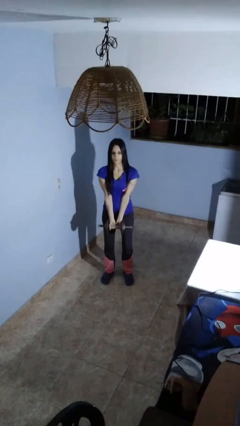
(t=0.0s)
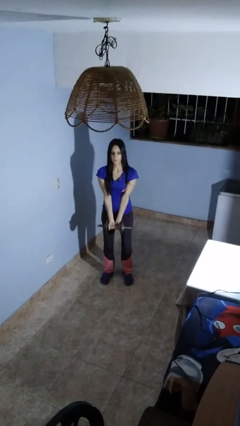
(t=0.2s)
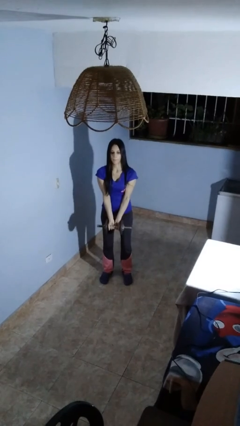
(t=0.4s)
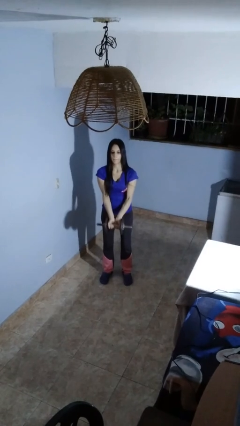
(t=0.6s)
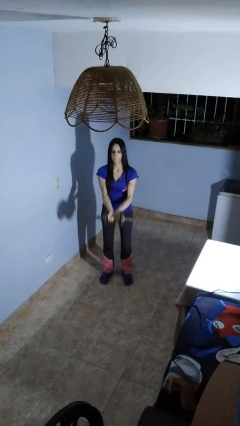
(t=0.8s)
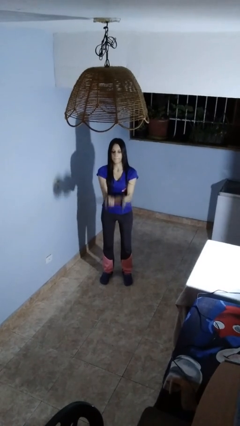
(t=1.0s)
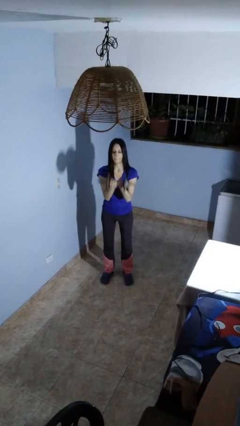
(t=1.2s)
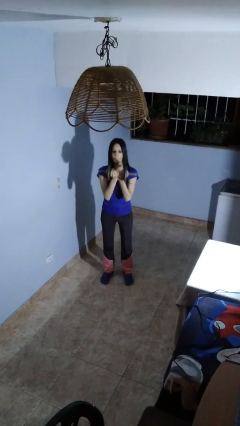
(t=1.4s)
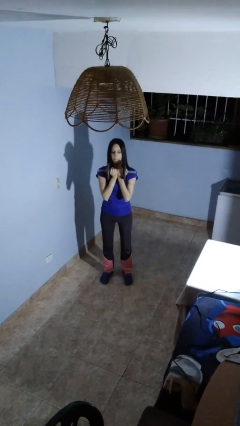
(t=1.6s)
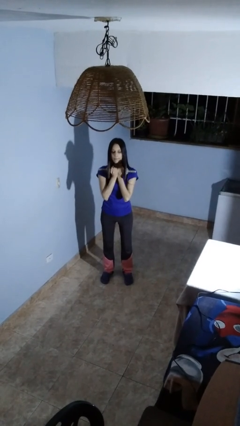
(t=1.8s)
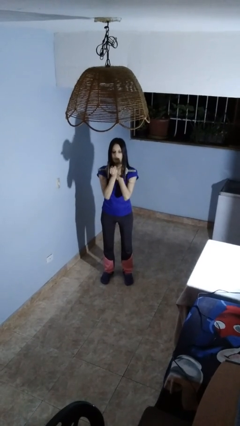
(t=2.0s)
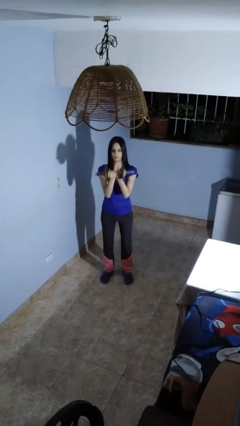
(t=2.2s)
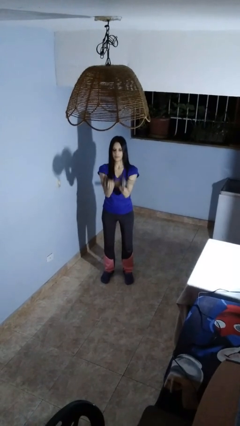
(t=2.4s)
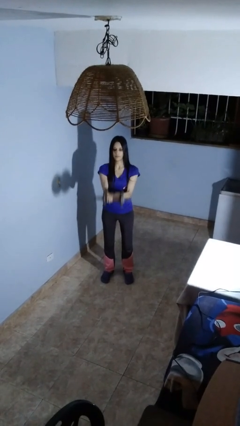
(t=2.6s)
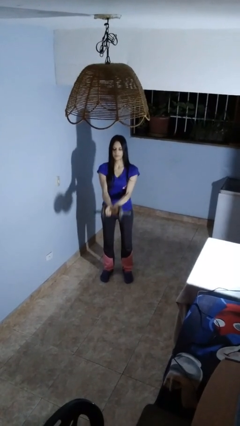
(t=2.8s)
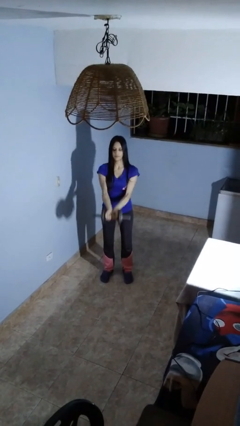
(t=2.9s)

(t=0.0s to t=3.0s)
person lifts dumbbells

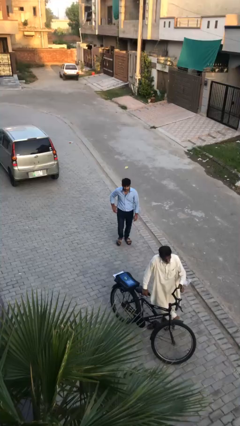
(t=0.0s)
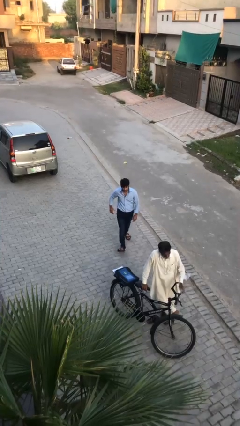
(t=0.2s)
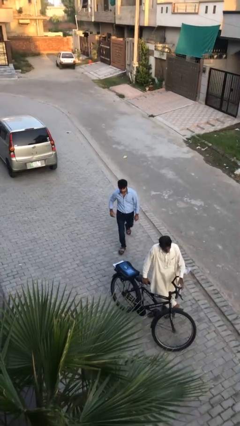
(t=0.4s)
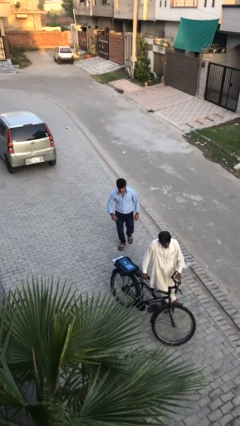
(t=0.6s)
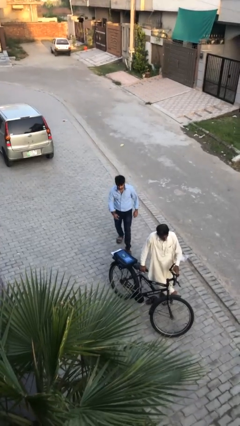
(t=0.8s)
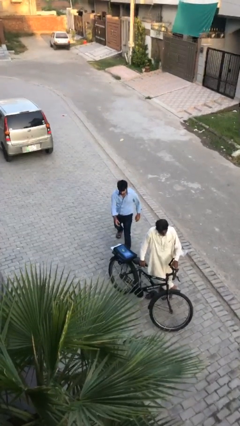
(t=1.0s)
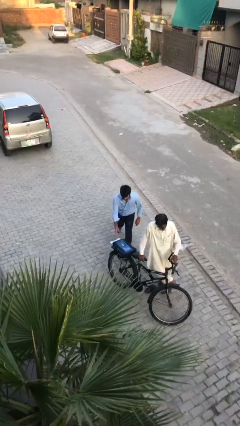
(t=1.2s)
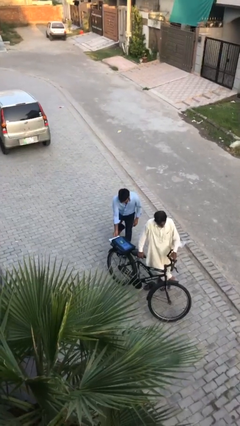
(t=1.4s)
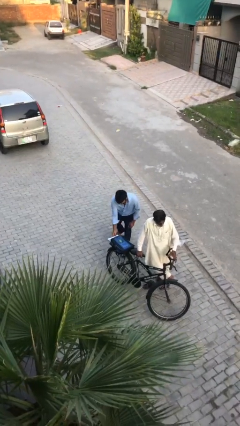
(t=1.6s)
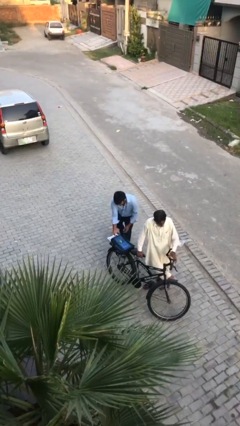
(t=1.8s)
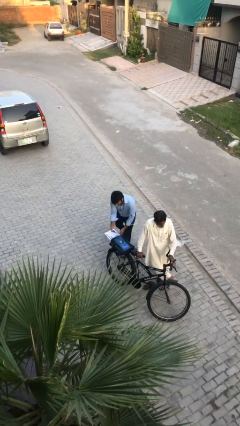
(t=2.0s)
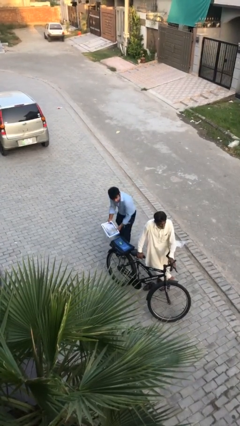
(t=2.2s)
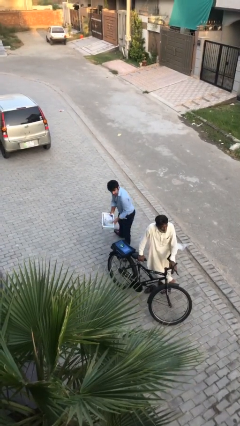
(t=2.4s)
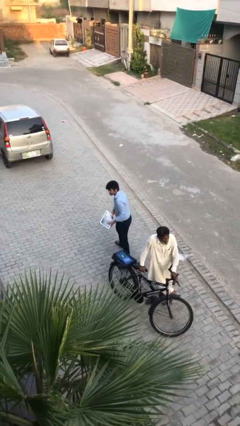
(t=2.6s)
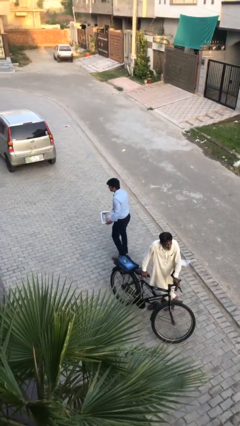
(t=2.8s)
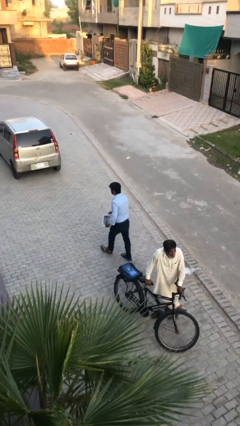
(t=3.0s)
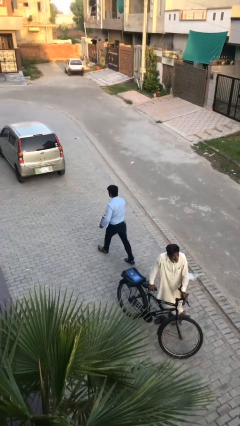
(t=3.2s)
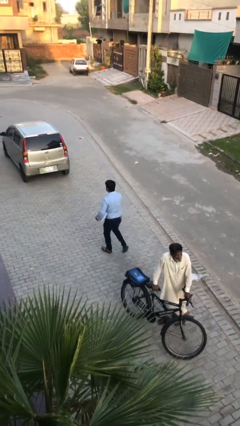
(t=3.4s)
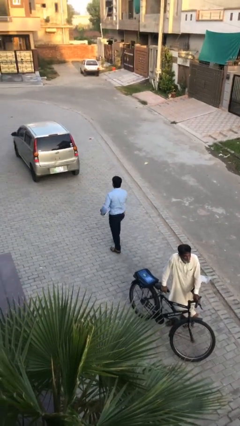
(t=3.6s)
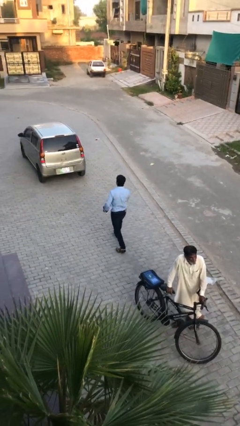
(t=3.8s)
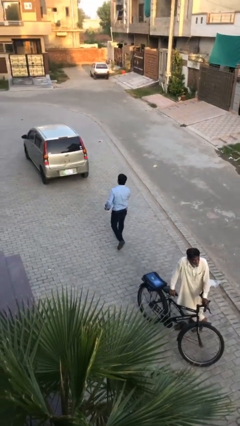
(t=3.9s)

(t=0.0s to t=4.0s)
person steals object from person

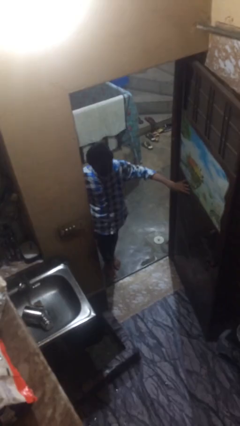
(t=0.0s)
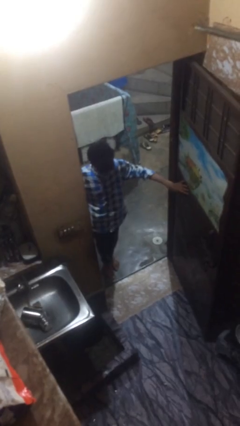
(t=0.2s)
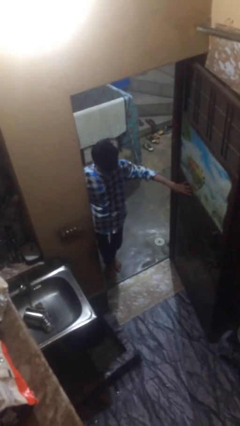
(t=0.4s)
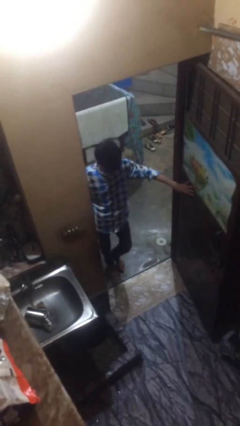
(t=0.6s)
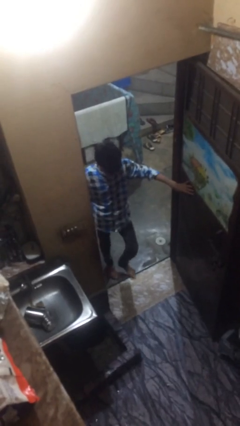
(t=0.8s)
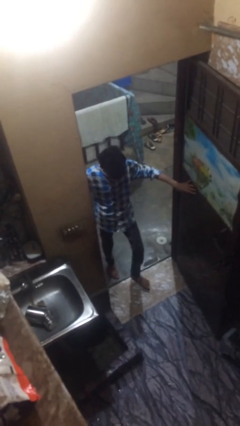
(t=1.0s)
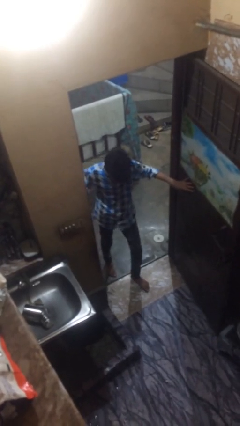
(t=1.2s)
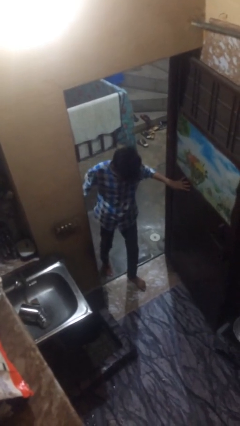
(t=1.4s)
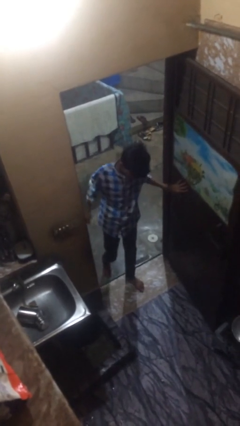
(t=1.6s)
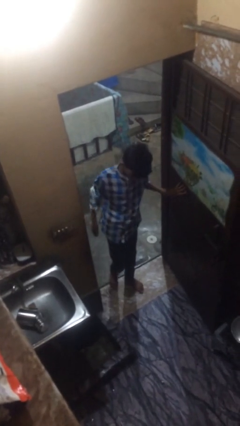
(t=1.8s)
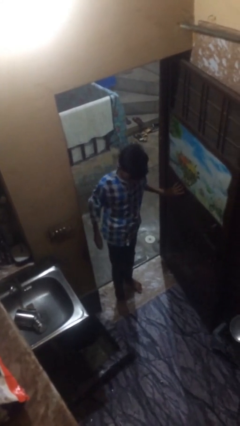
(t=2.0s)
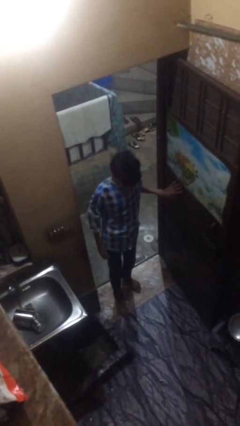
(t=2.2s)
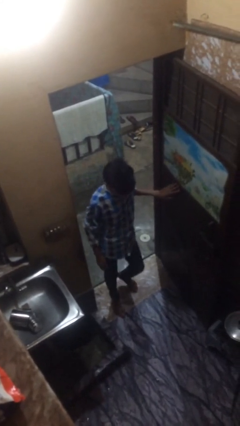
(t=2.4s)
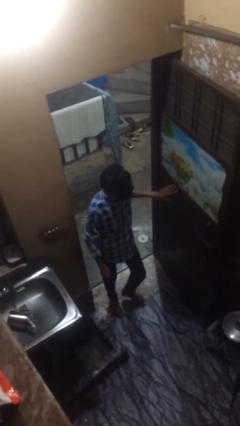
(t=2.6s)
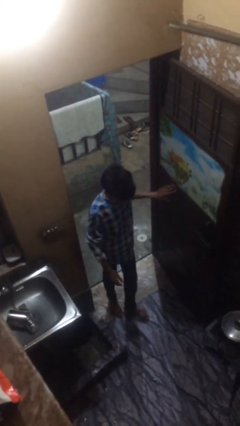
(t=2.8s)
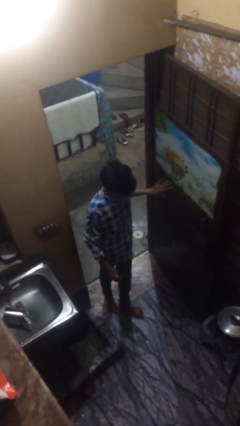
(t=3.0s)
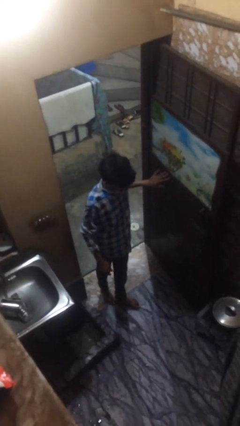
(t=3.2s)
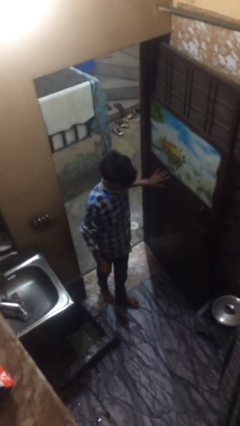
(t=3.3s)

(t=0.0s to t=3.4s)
person enters scene through structure

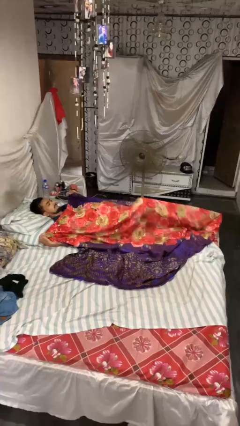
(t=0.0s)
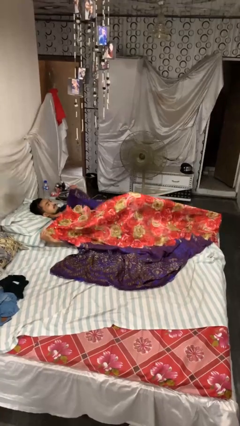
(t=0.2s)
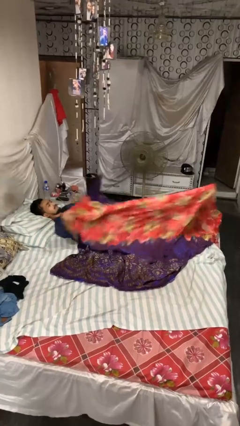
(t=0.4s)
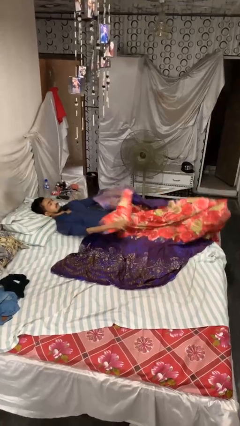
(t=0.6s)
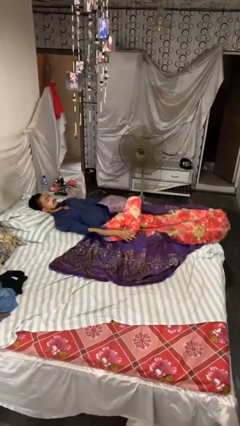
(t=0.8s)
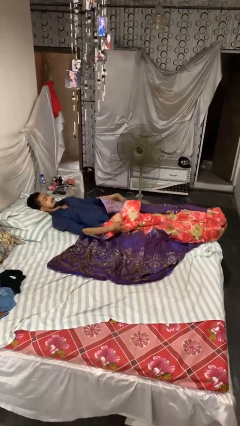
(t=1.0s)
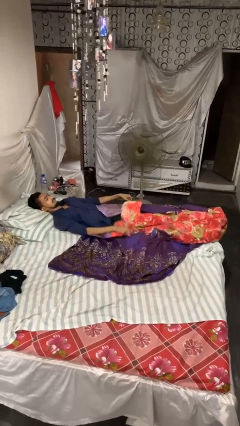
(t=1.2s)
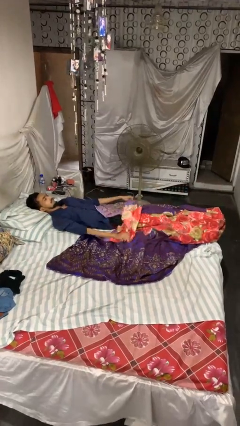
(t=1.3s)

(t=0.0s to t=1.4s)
person uncovers with bedsheets

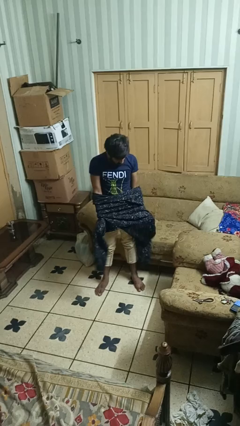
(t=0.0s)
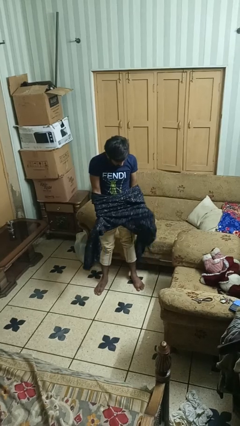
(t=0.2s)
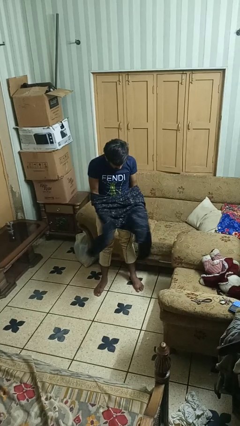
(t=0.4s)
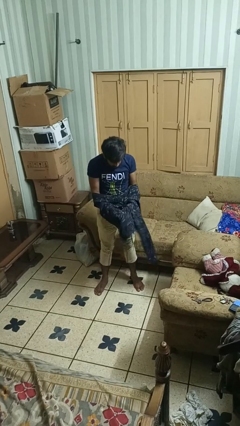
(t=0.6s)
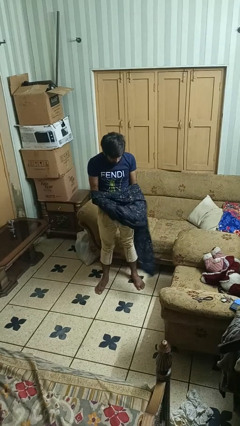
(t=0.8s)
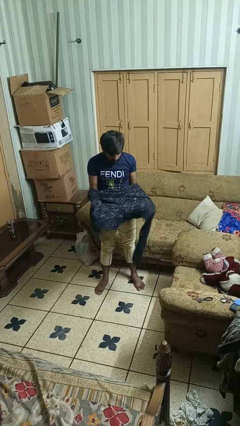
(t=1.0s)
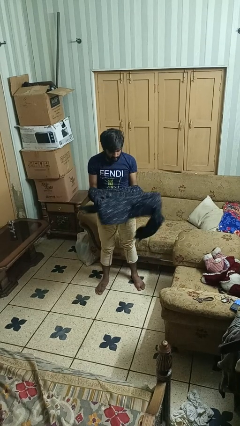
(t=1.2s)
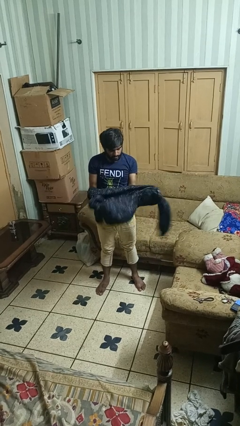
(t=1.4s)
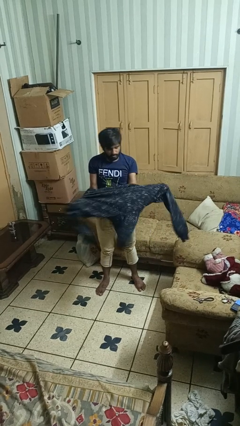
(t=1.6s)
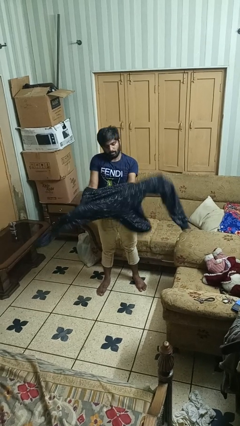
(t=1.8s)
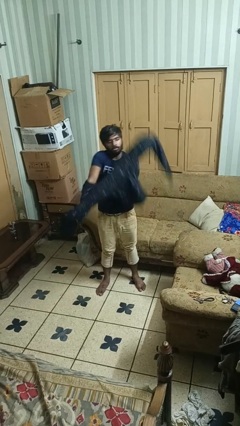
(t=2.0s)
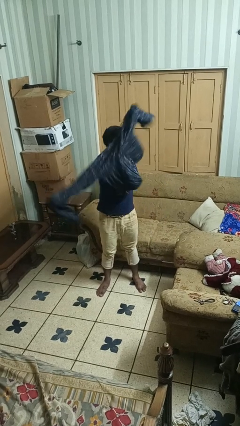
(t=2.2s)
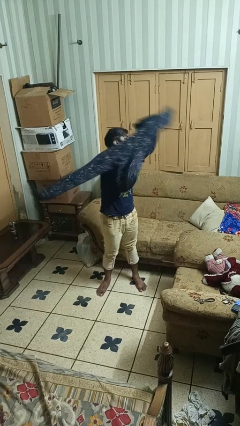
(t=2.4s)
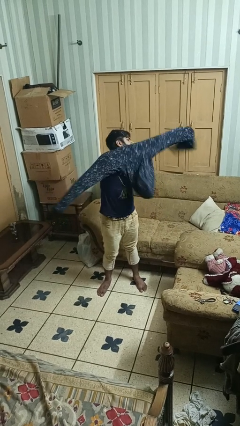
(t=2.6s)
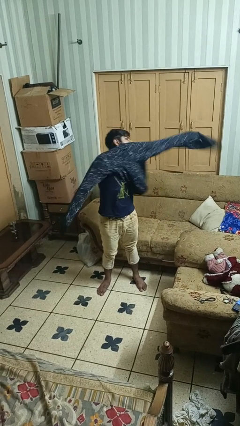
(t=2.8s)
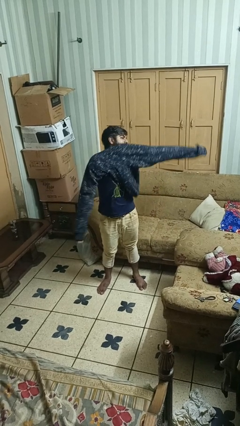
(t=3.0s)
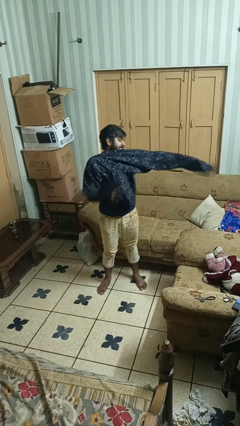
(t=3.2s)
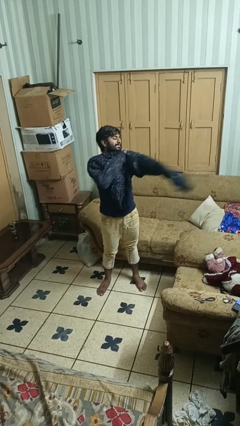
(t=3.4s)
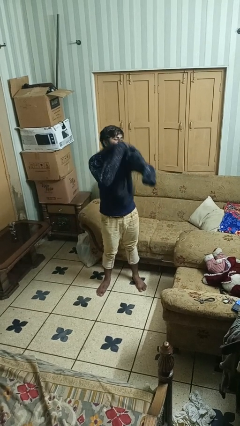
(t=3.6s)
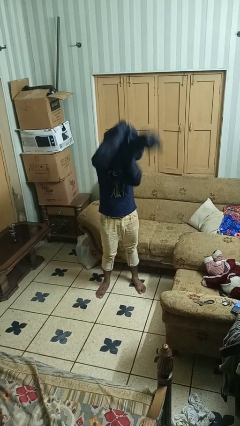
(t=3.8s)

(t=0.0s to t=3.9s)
person puts on hoodie

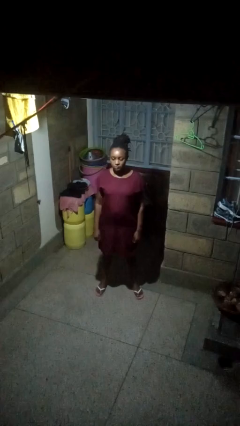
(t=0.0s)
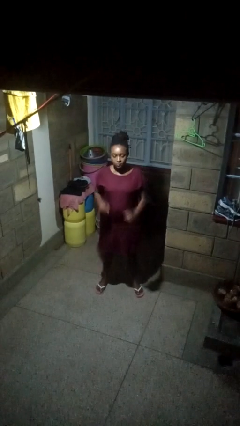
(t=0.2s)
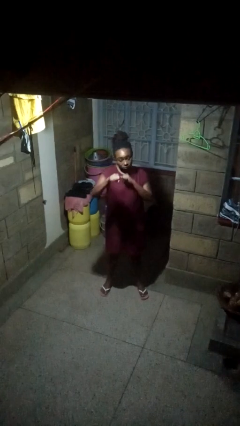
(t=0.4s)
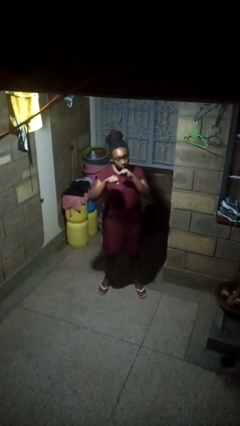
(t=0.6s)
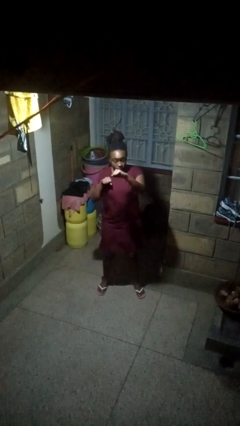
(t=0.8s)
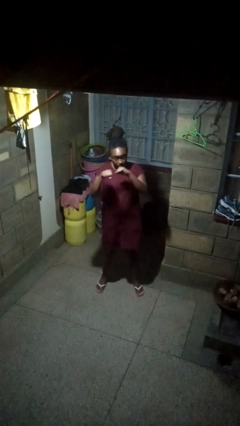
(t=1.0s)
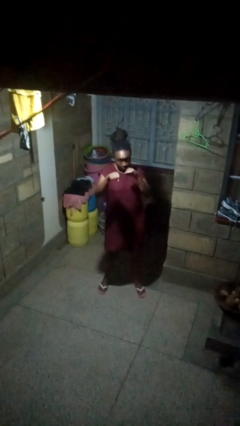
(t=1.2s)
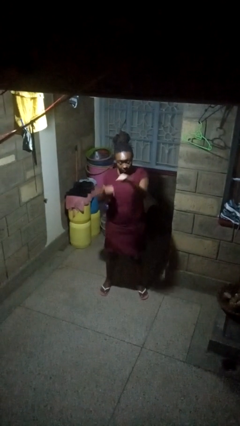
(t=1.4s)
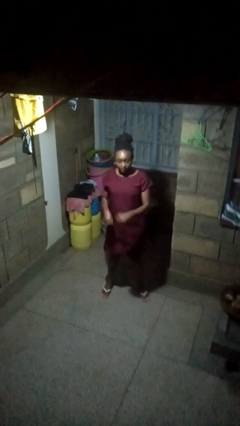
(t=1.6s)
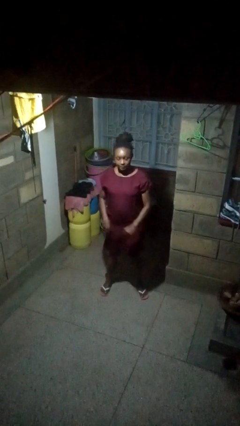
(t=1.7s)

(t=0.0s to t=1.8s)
person punches

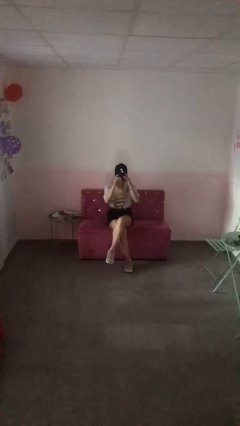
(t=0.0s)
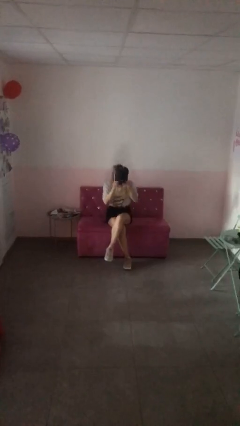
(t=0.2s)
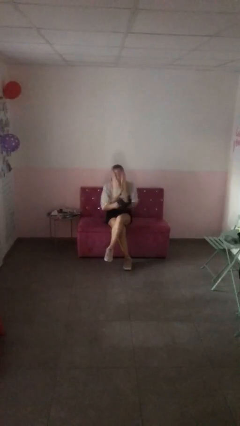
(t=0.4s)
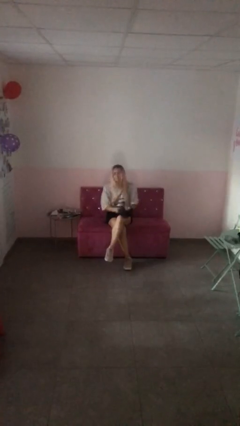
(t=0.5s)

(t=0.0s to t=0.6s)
person takes off hat
